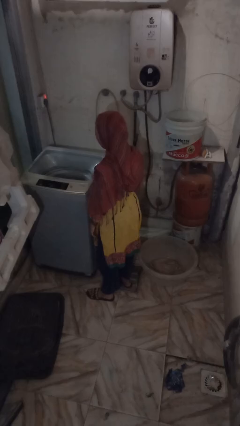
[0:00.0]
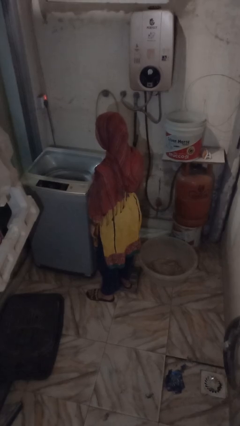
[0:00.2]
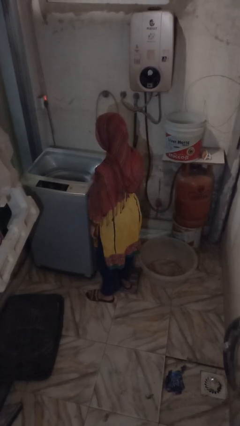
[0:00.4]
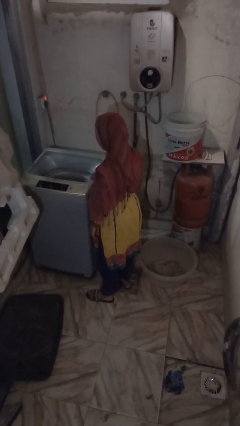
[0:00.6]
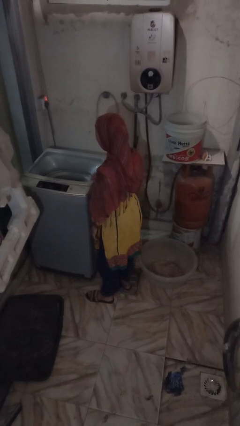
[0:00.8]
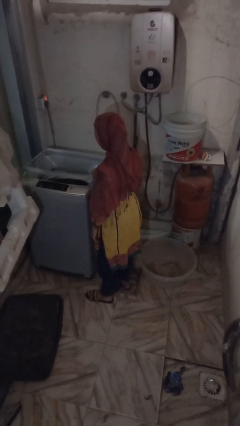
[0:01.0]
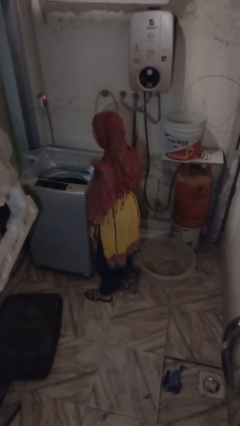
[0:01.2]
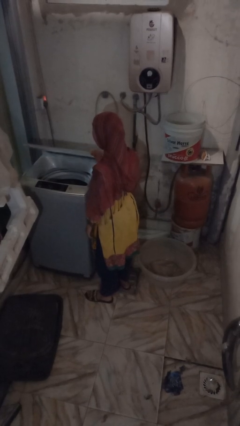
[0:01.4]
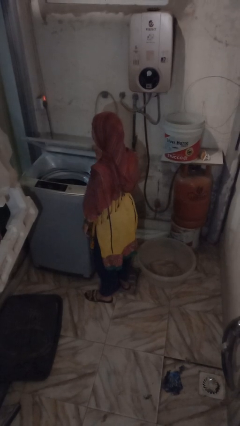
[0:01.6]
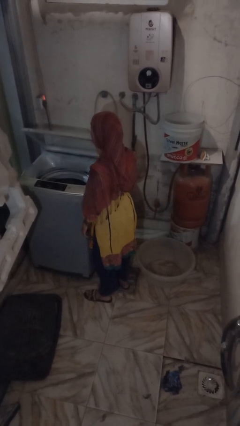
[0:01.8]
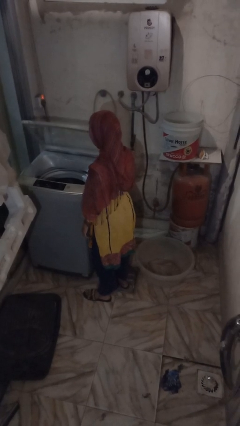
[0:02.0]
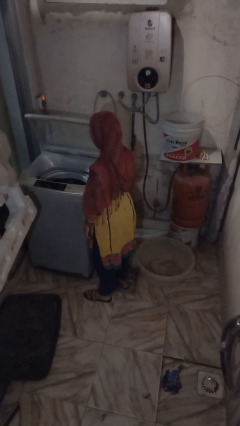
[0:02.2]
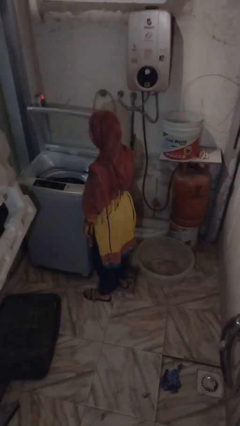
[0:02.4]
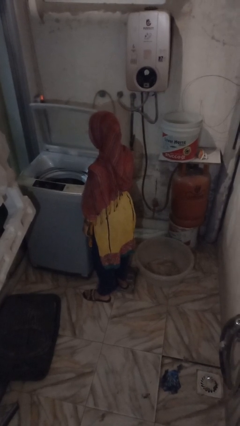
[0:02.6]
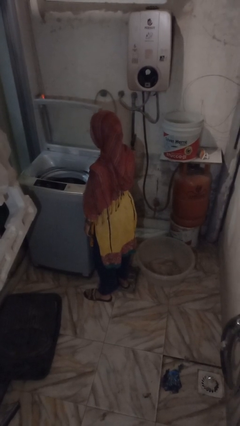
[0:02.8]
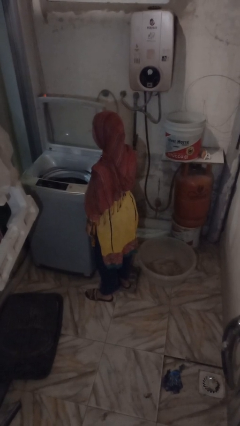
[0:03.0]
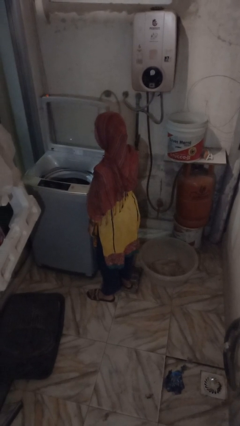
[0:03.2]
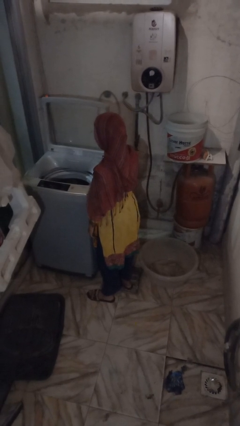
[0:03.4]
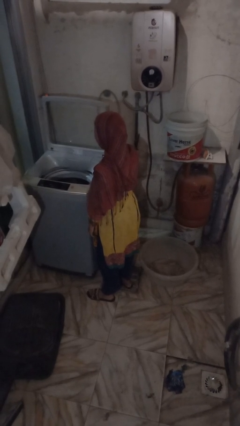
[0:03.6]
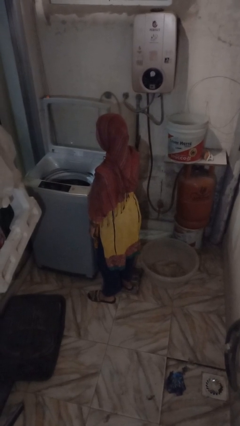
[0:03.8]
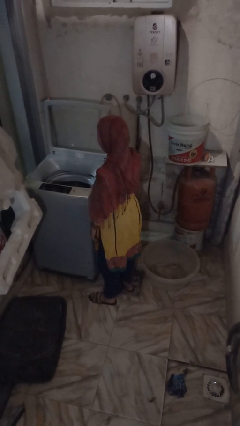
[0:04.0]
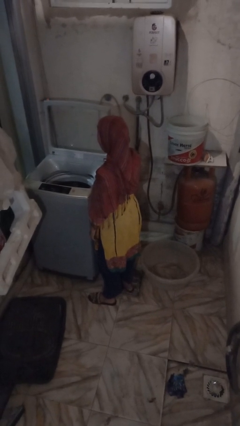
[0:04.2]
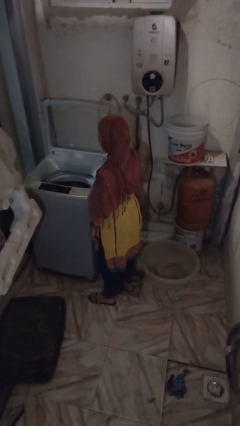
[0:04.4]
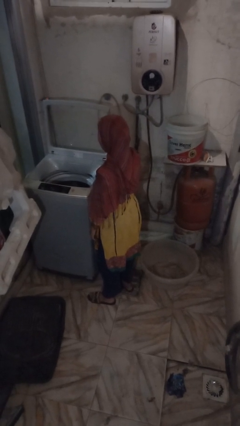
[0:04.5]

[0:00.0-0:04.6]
person opens clothes washer

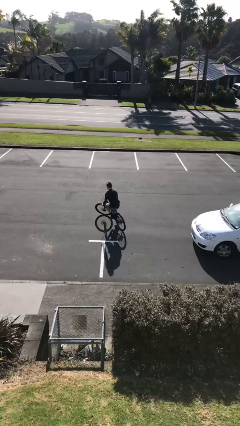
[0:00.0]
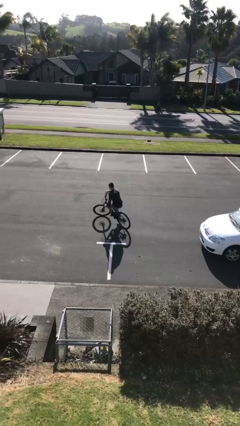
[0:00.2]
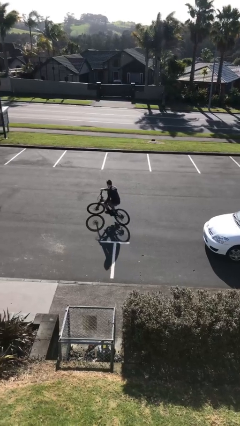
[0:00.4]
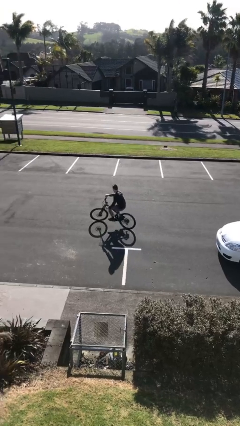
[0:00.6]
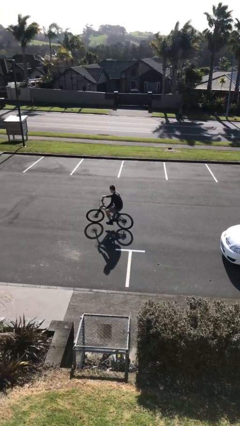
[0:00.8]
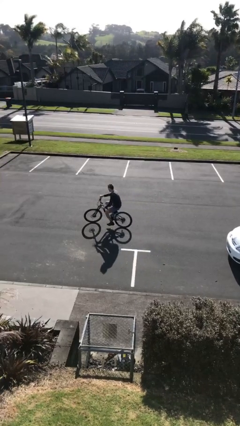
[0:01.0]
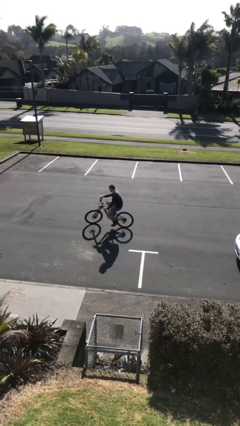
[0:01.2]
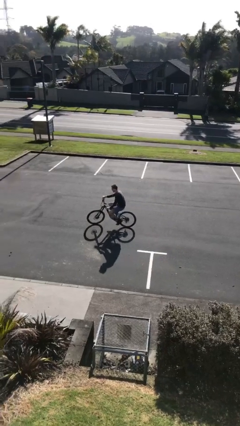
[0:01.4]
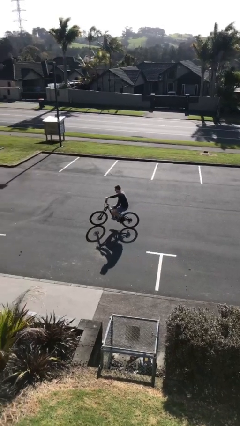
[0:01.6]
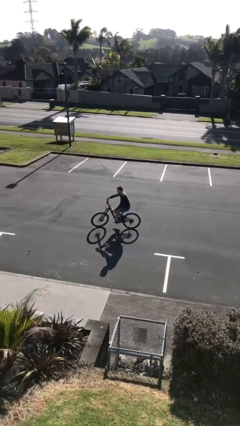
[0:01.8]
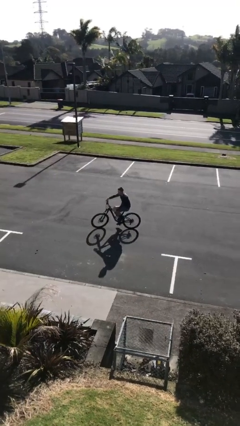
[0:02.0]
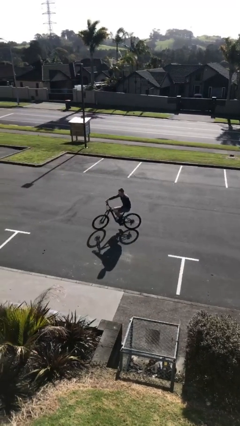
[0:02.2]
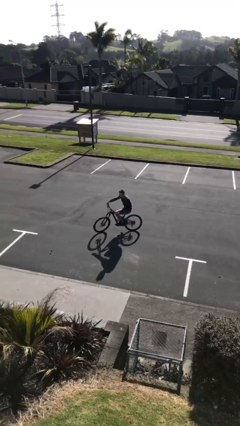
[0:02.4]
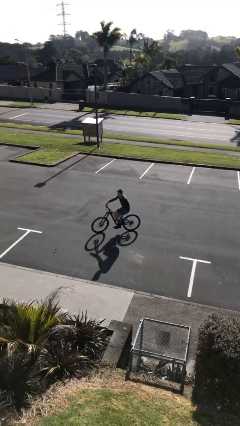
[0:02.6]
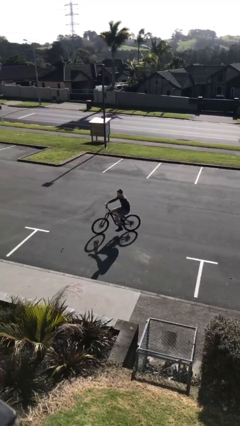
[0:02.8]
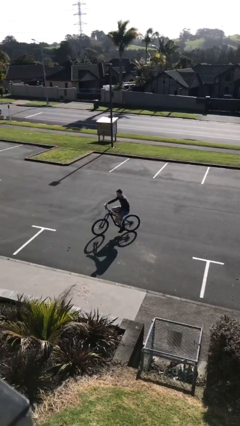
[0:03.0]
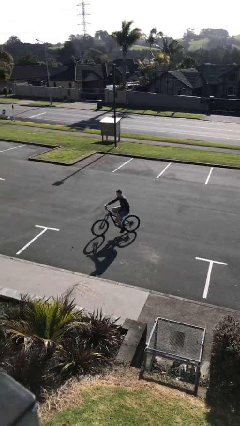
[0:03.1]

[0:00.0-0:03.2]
person rides bicycle

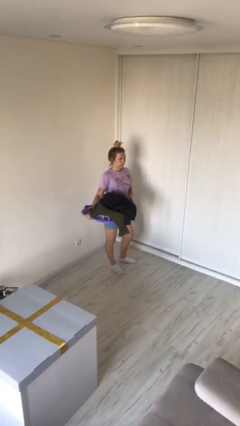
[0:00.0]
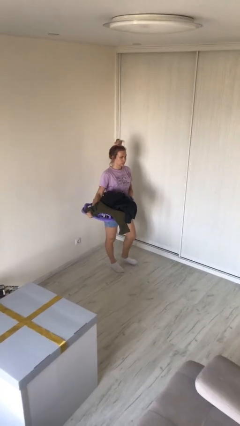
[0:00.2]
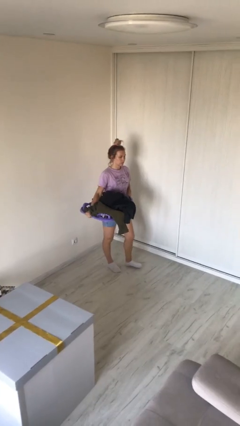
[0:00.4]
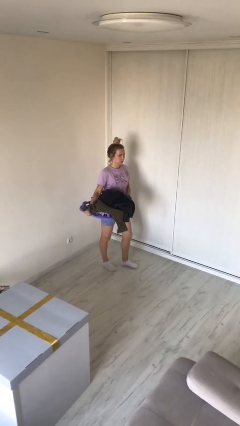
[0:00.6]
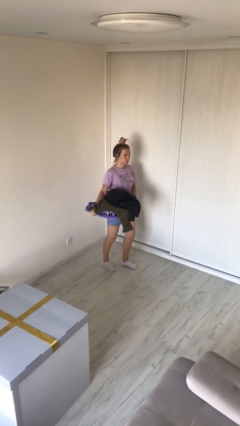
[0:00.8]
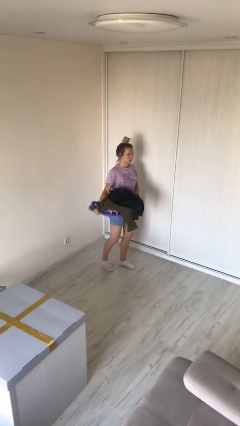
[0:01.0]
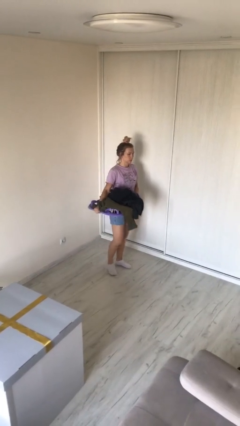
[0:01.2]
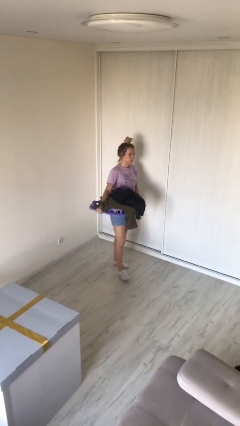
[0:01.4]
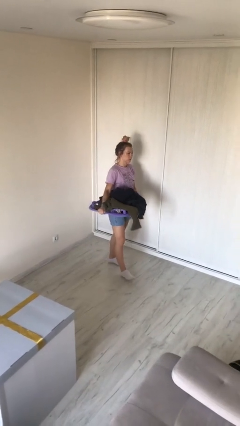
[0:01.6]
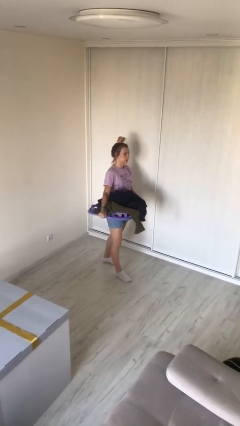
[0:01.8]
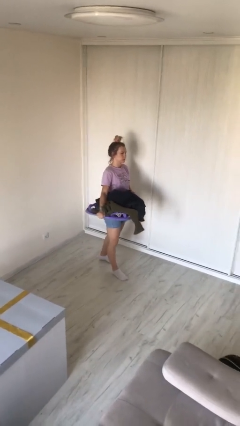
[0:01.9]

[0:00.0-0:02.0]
person carries laundry basket

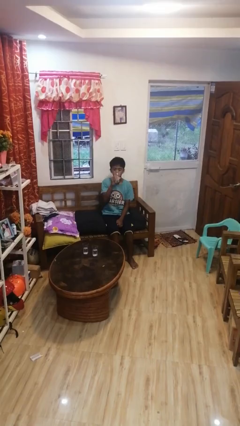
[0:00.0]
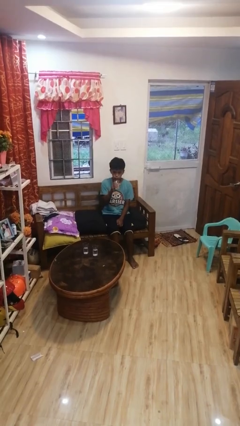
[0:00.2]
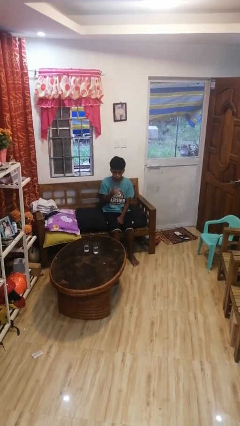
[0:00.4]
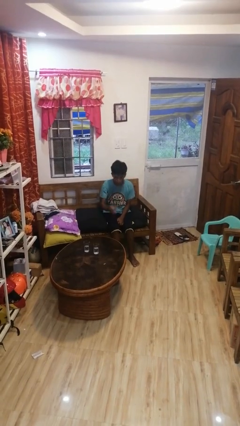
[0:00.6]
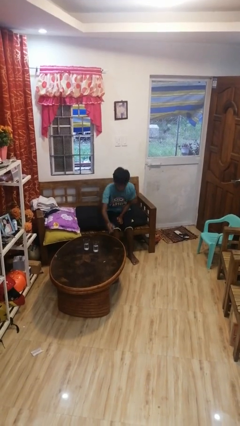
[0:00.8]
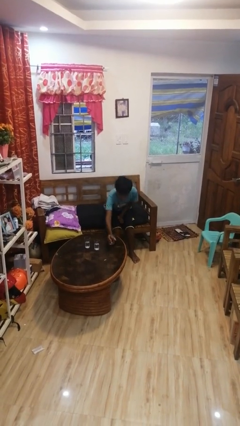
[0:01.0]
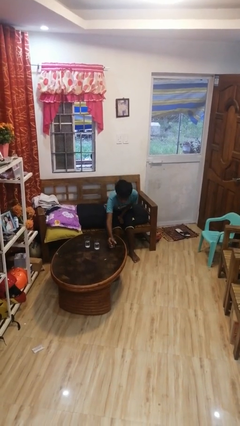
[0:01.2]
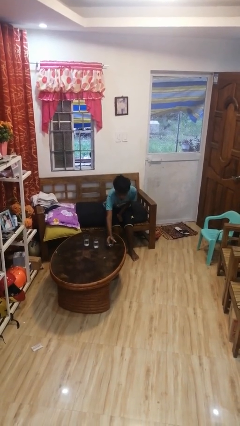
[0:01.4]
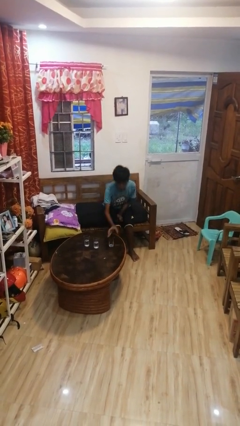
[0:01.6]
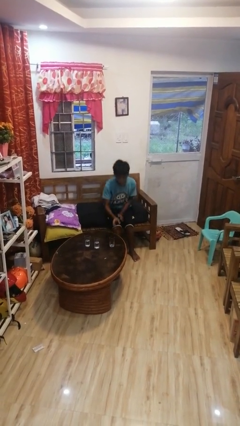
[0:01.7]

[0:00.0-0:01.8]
person puts down object on table

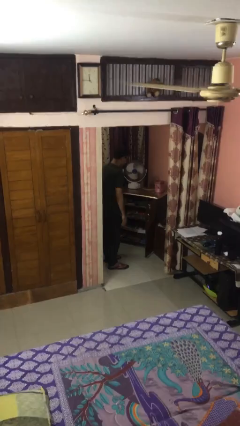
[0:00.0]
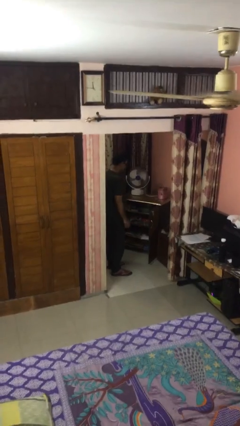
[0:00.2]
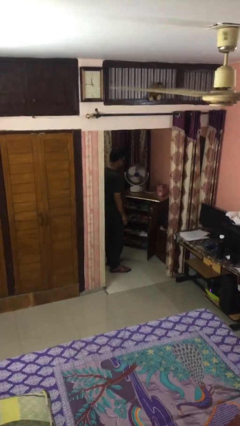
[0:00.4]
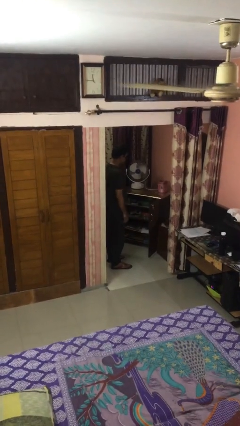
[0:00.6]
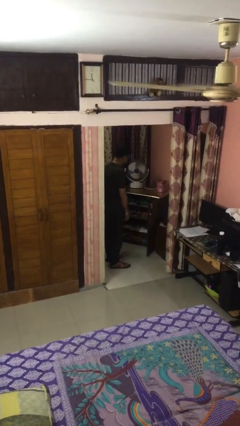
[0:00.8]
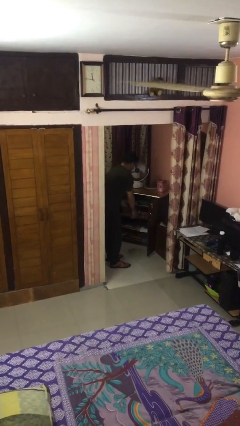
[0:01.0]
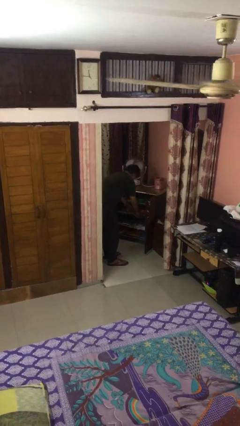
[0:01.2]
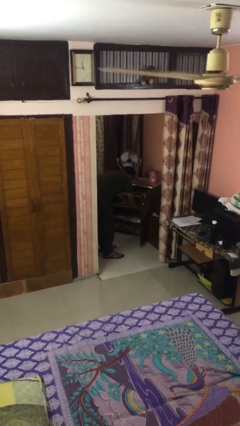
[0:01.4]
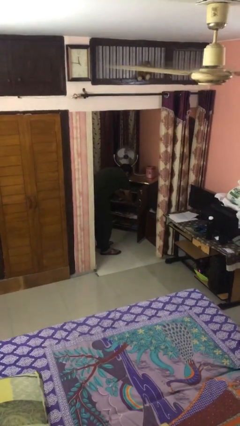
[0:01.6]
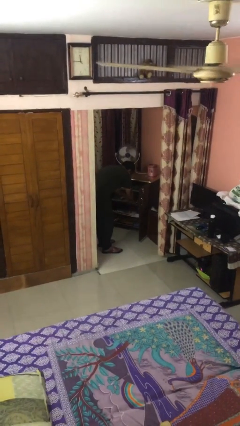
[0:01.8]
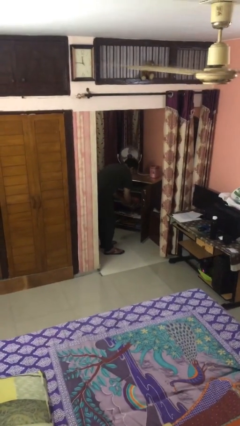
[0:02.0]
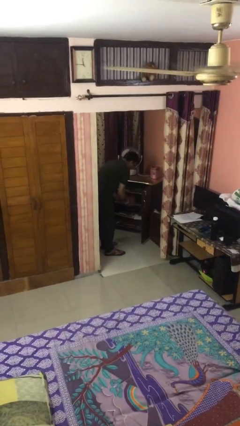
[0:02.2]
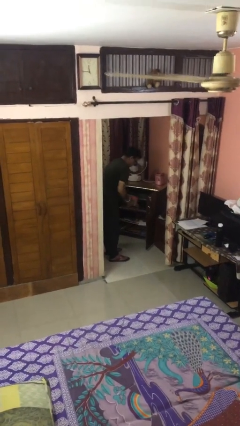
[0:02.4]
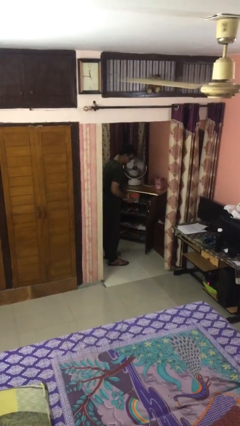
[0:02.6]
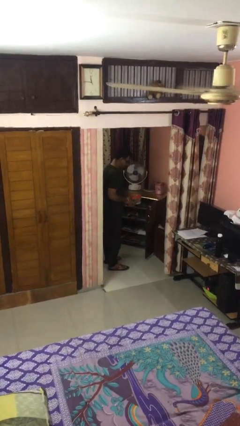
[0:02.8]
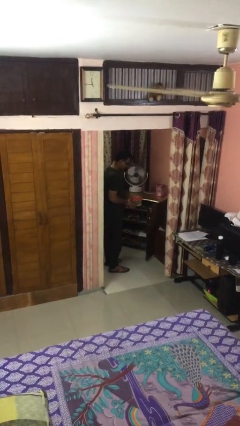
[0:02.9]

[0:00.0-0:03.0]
person picks up object from cabinet

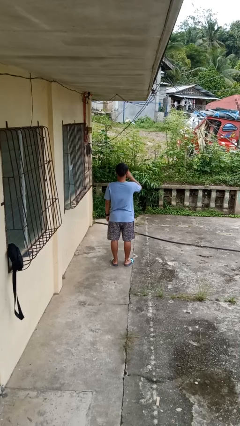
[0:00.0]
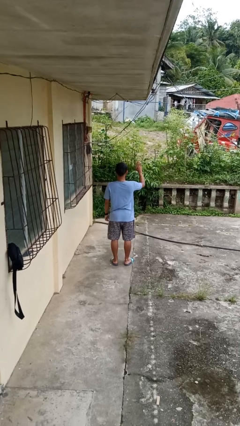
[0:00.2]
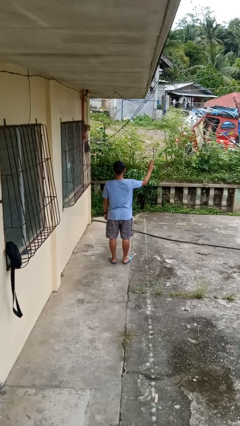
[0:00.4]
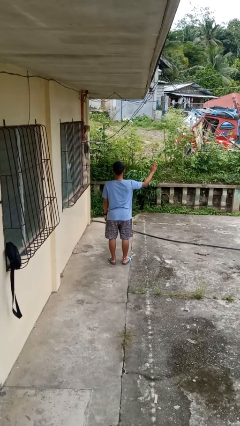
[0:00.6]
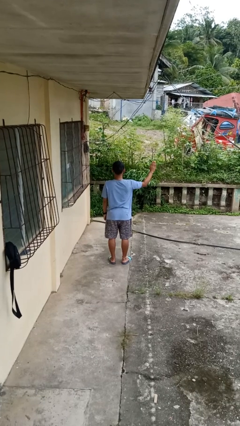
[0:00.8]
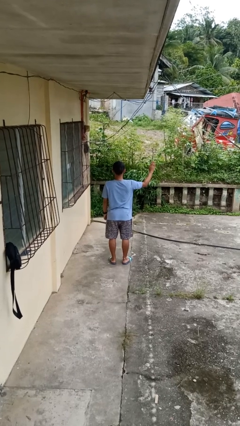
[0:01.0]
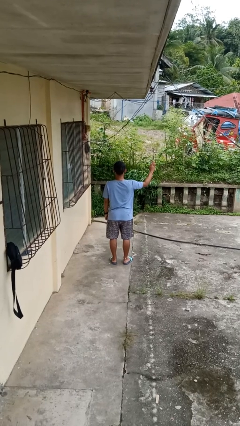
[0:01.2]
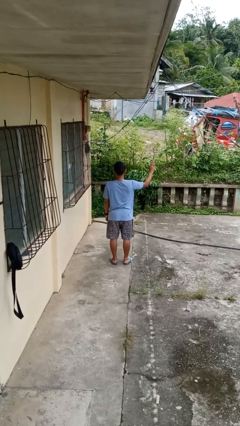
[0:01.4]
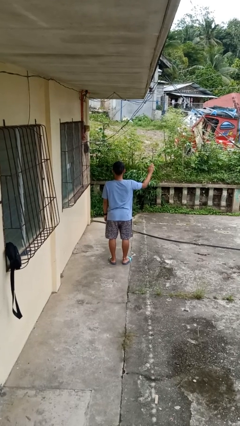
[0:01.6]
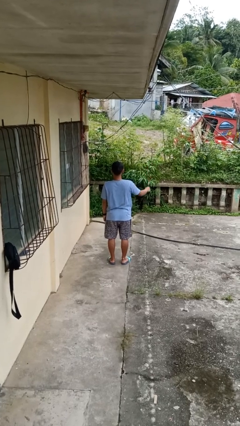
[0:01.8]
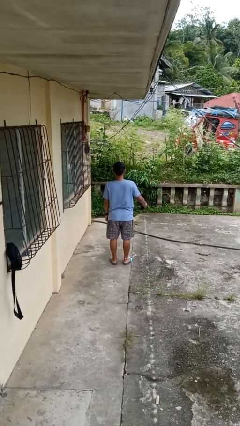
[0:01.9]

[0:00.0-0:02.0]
person gestures swipe right

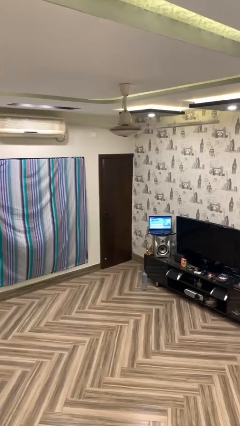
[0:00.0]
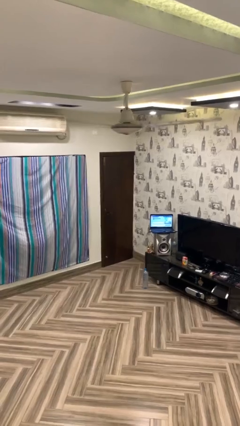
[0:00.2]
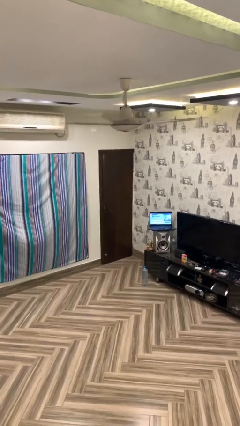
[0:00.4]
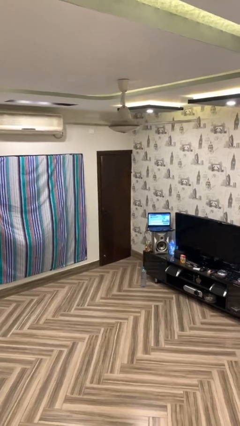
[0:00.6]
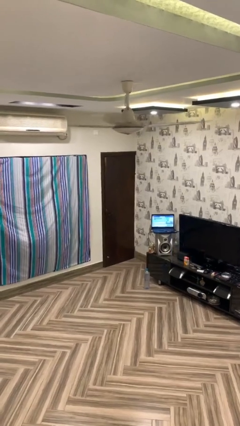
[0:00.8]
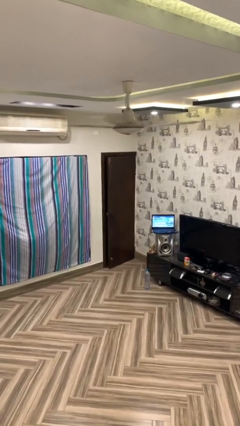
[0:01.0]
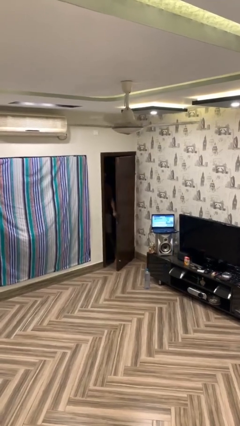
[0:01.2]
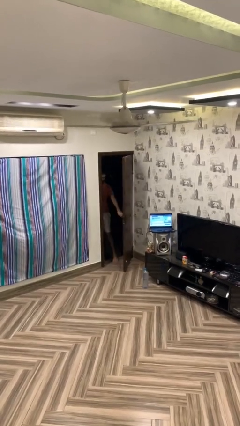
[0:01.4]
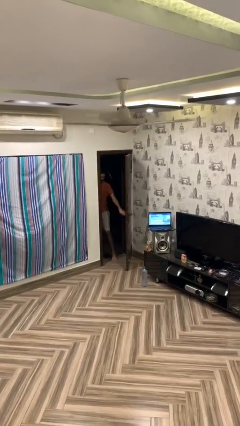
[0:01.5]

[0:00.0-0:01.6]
person opens facility door
